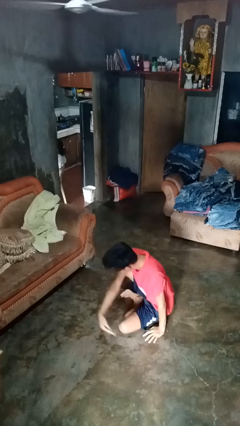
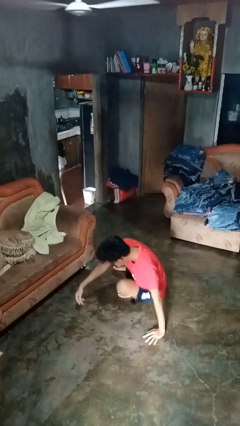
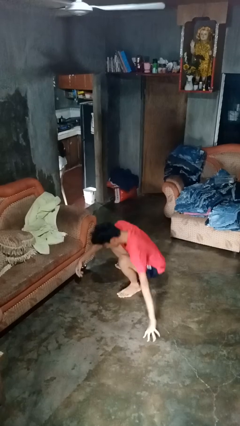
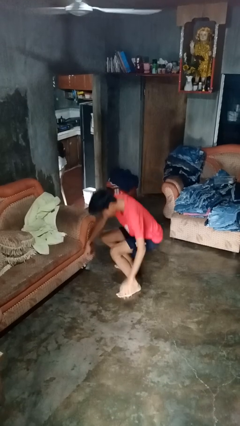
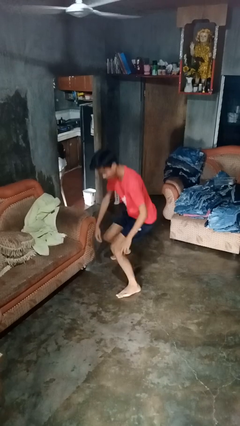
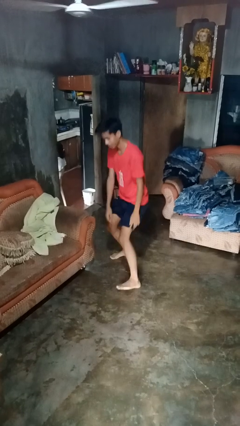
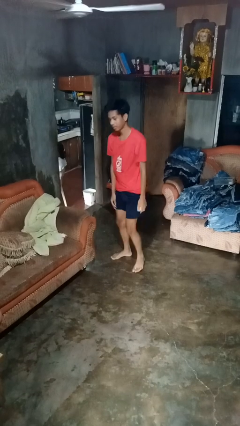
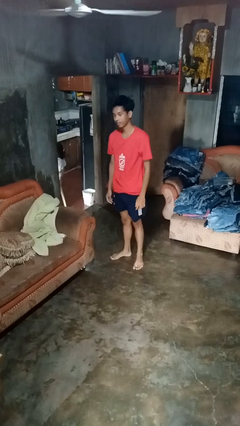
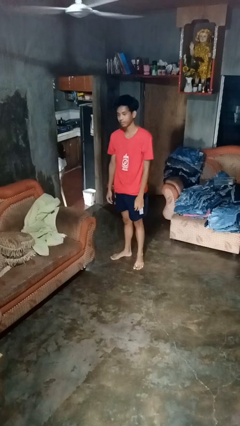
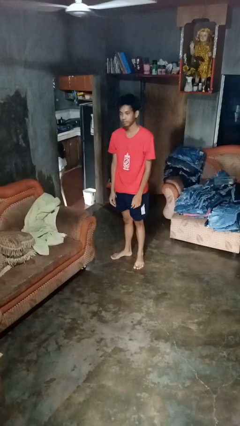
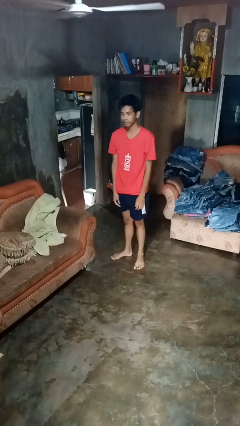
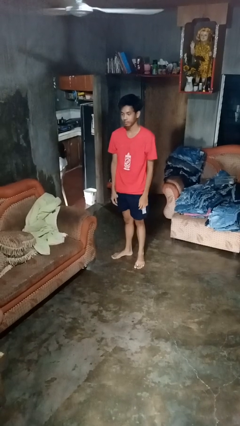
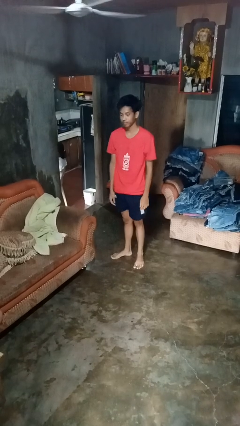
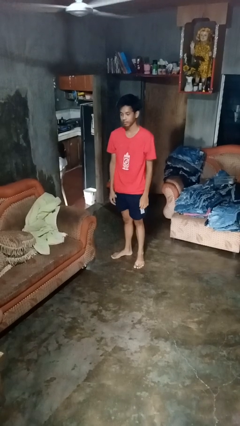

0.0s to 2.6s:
person stands up from floor

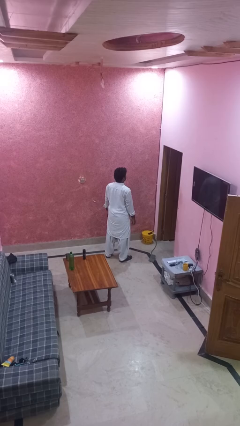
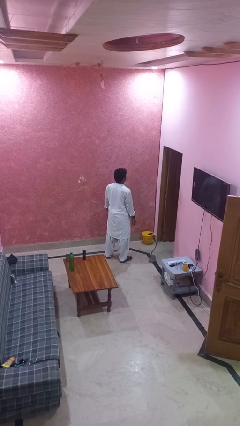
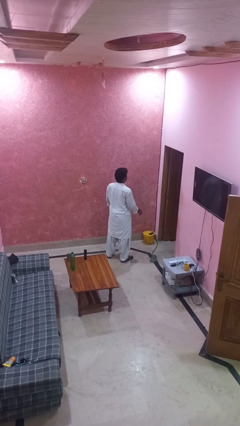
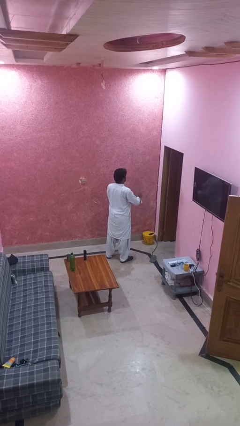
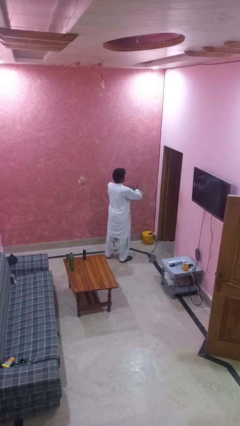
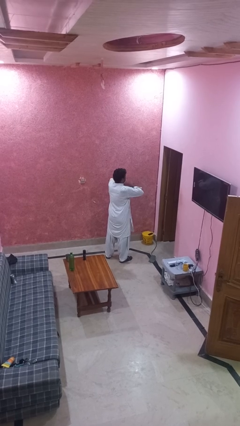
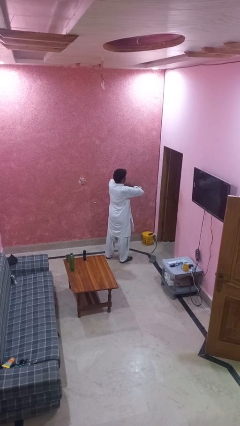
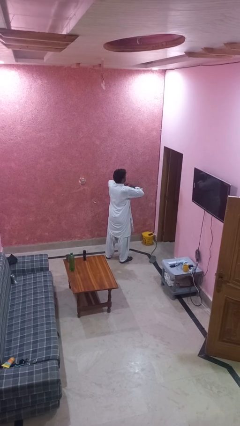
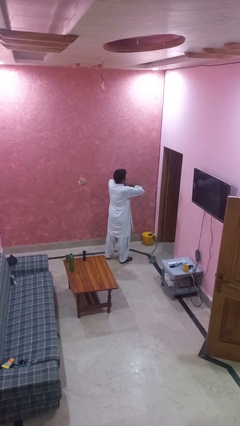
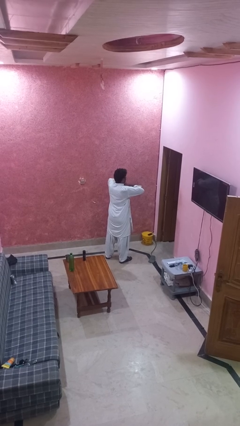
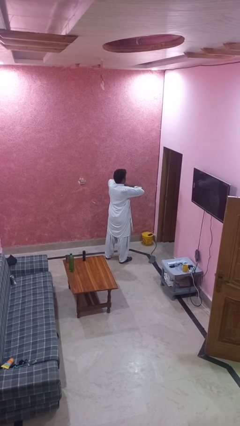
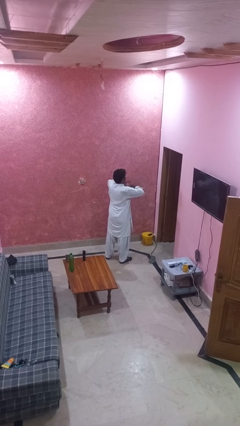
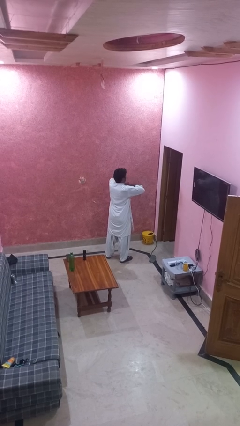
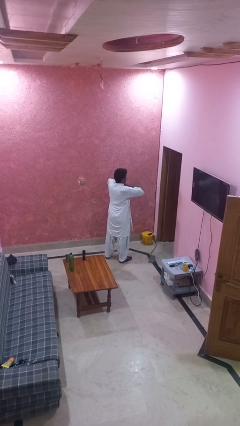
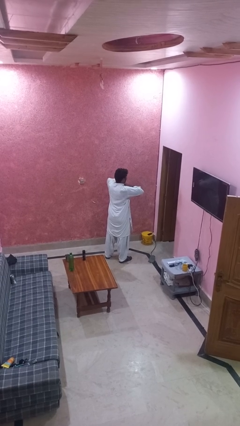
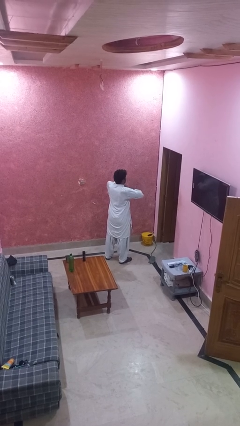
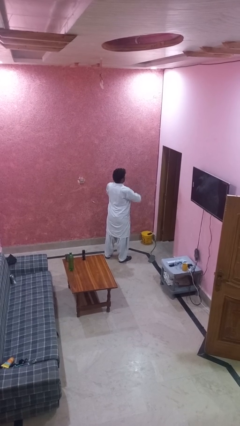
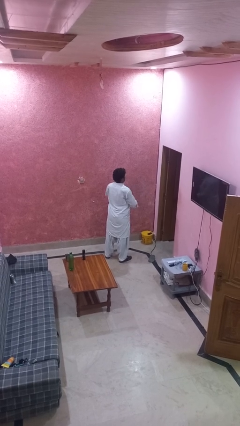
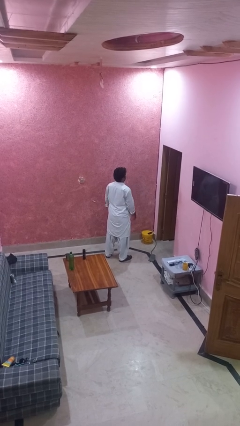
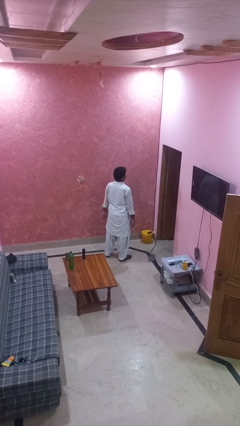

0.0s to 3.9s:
person snaps fingers

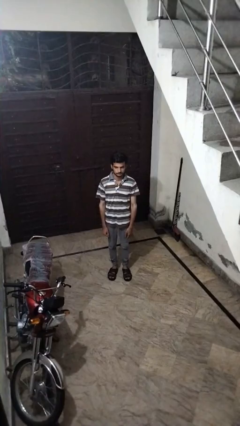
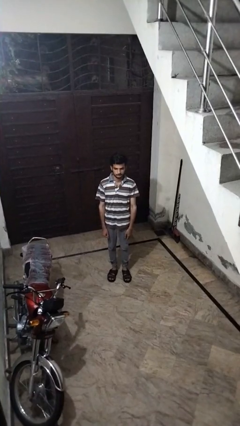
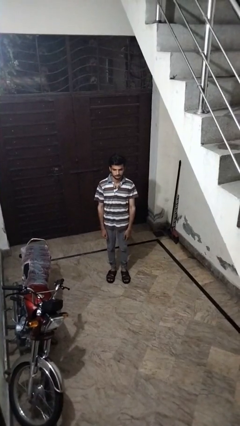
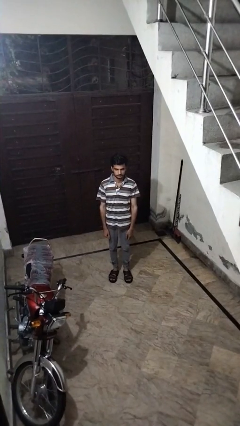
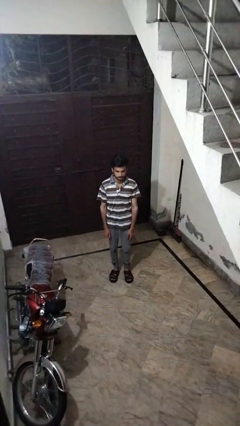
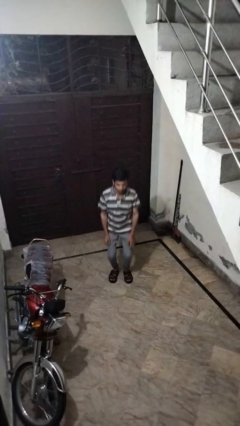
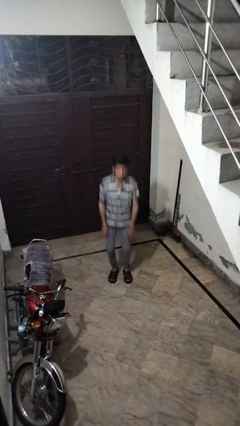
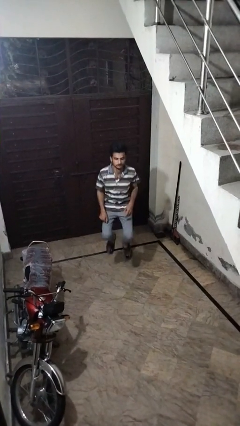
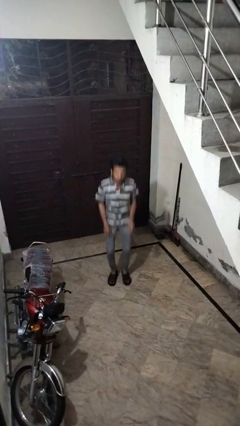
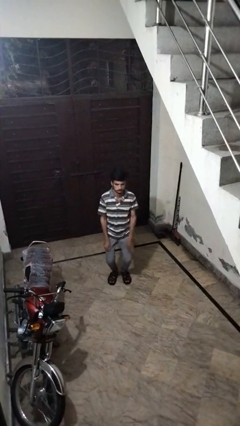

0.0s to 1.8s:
person jumps

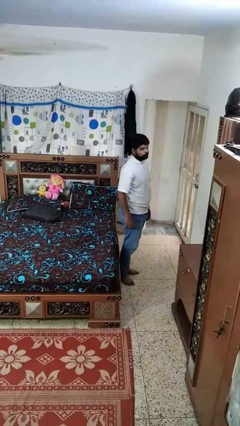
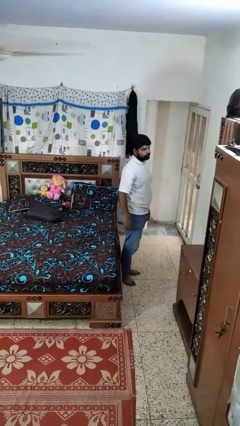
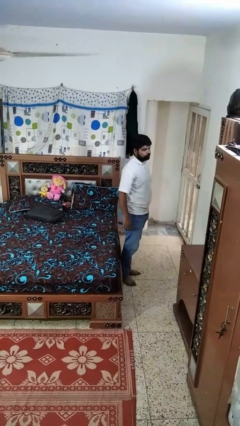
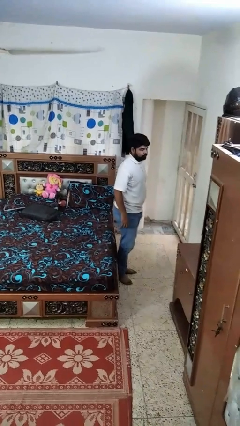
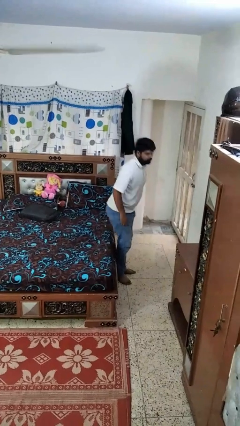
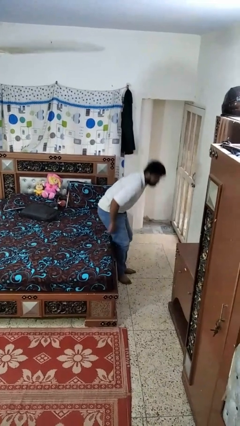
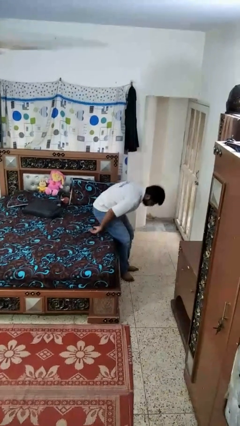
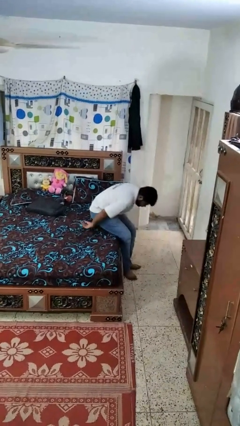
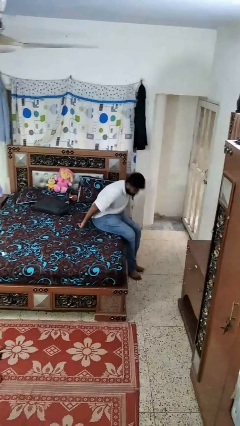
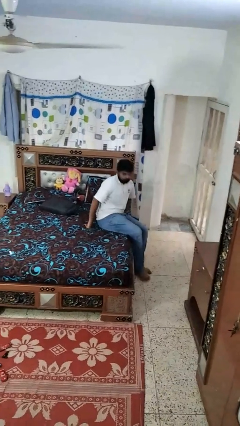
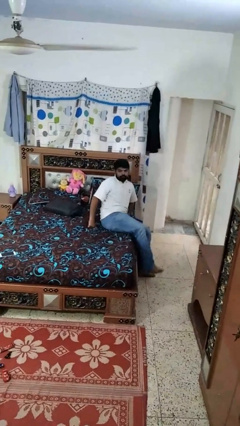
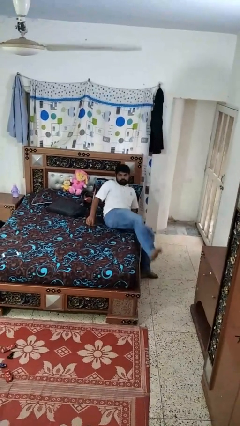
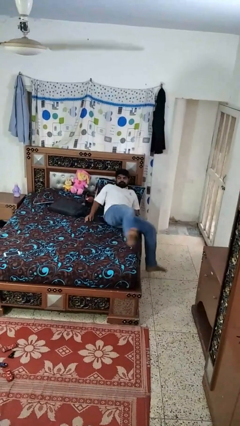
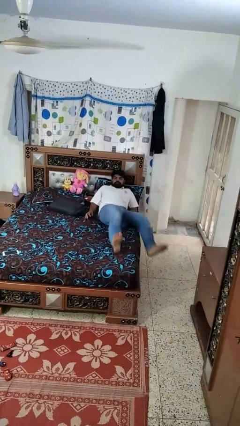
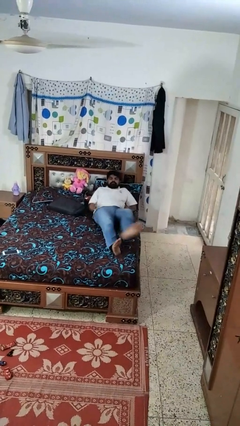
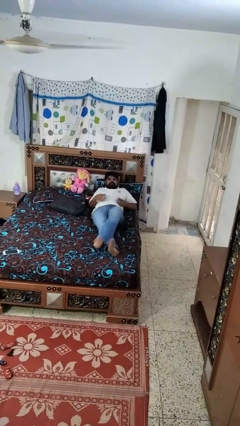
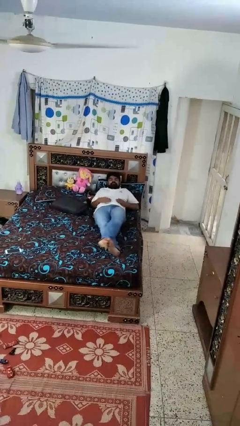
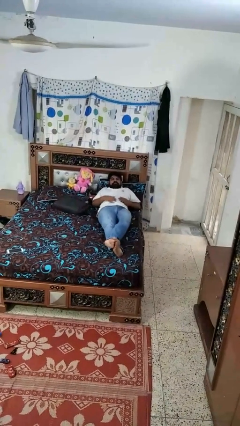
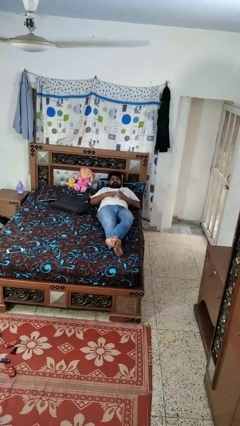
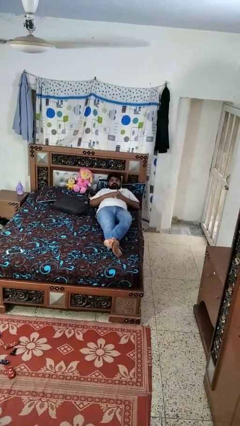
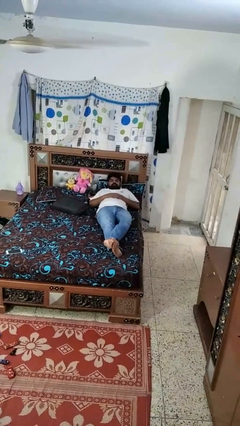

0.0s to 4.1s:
person lies down on bed

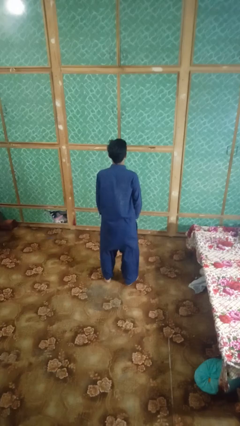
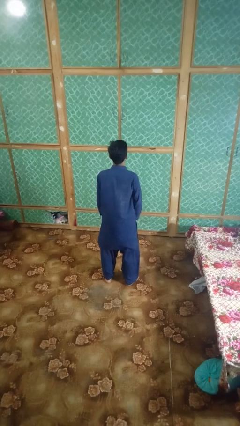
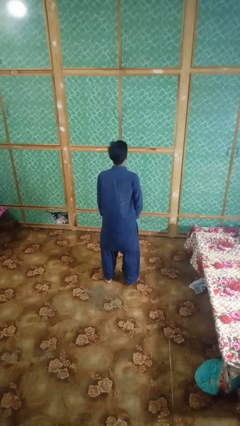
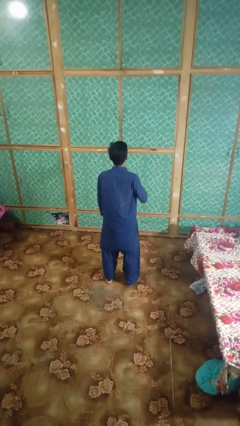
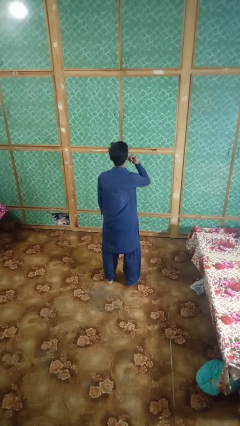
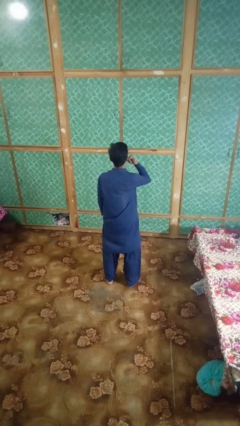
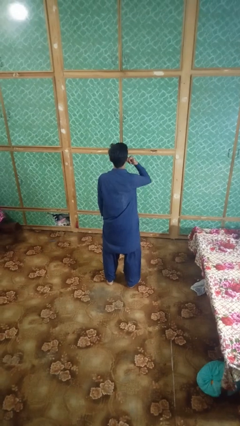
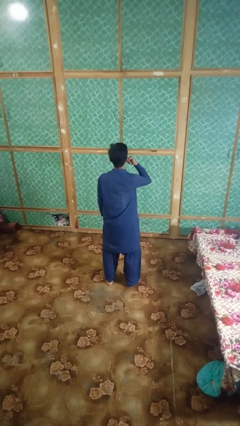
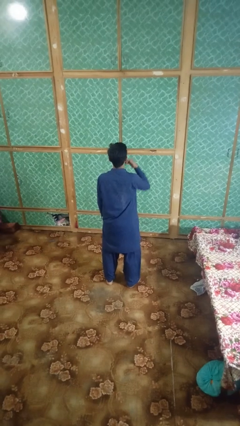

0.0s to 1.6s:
person gestures call me

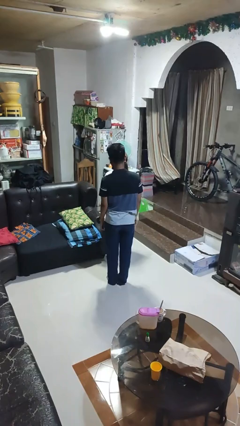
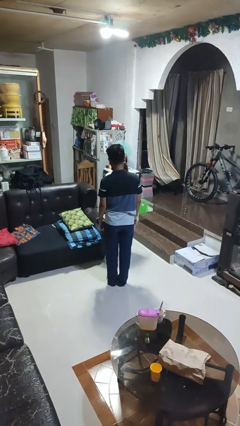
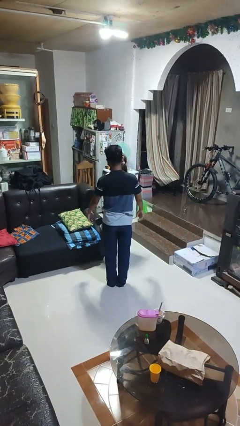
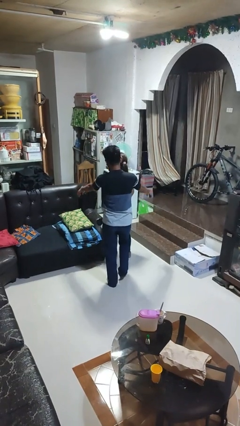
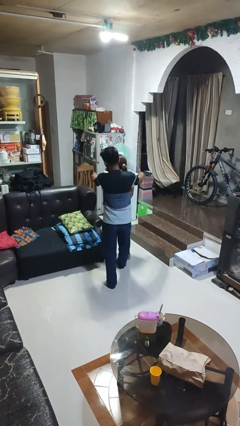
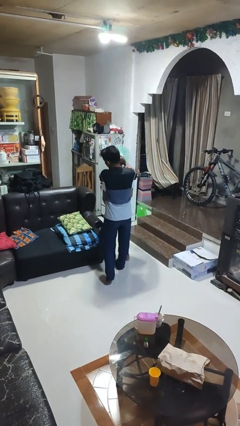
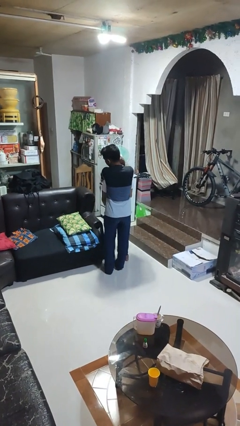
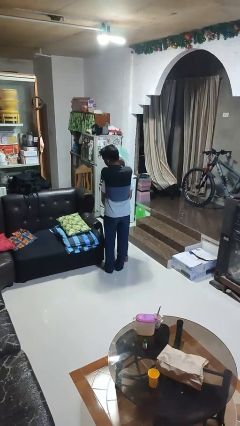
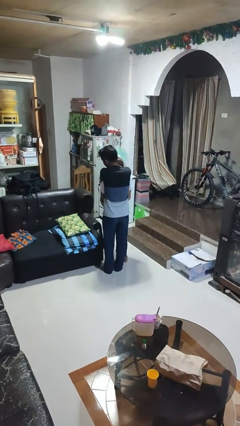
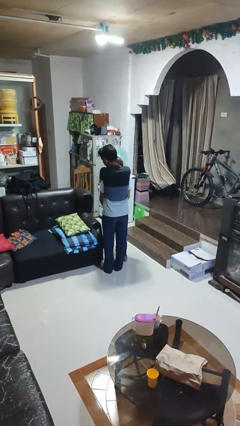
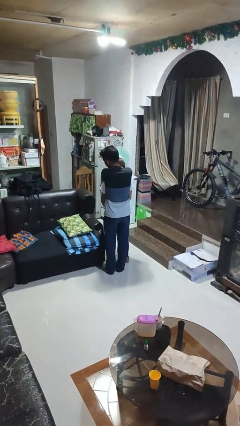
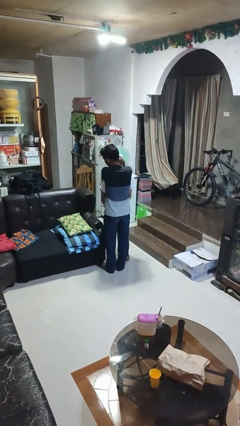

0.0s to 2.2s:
person hugs person from behind

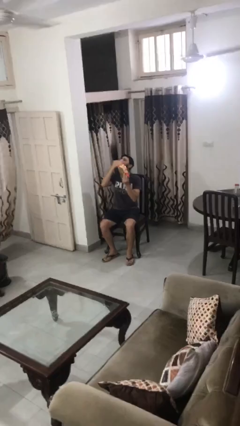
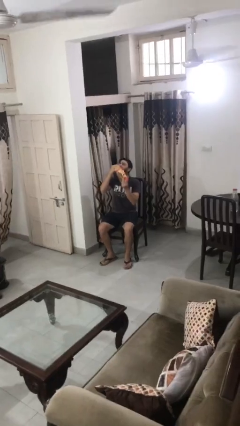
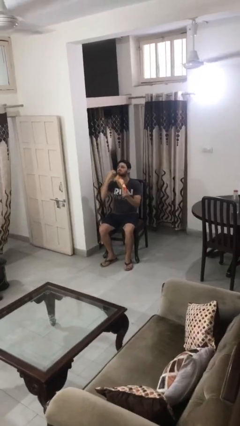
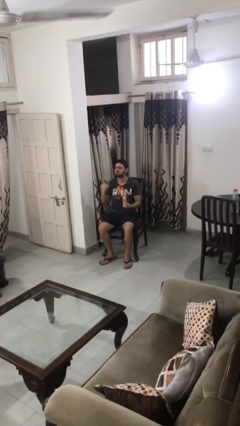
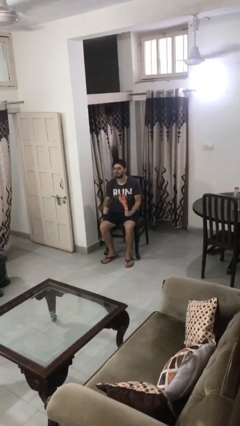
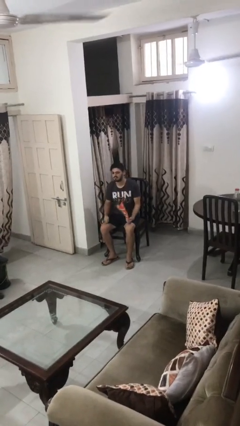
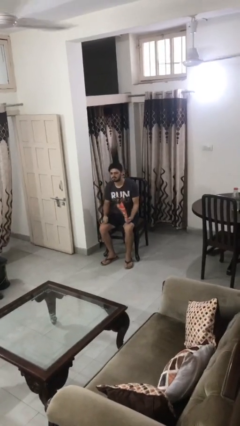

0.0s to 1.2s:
person eats snack from bag
